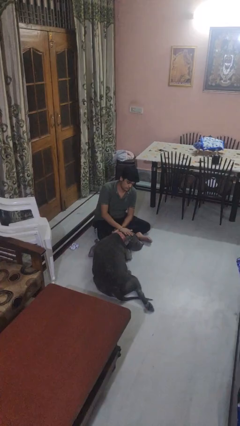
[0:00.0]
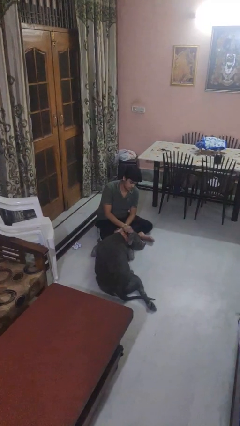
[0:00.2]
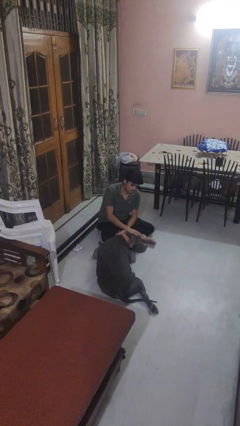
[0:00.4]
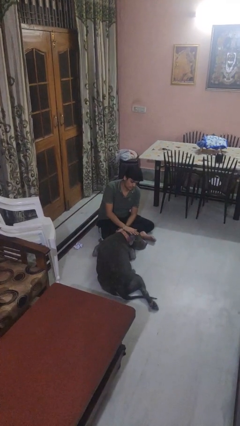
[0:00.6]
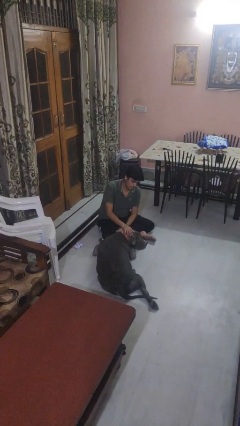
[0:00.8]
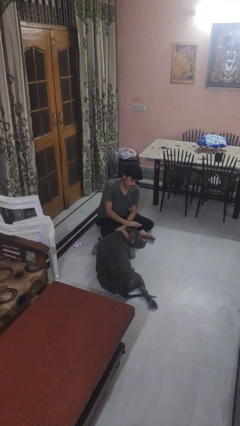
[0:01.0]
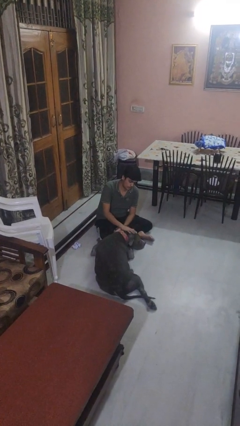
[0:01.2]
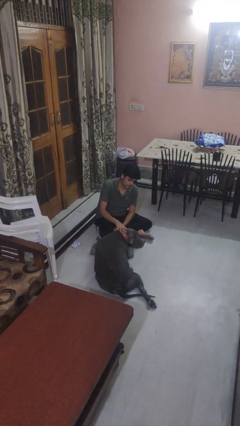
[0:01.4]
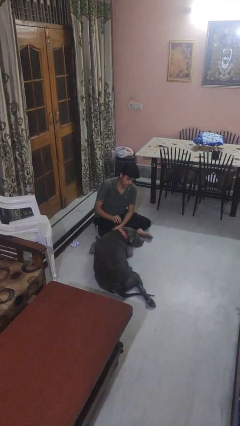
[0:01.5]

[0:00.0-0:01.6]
person pets dog

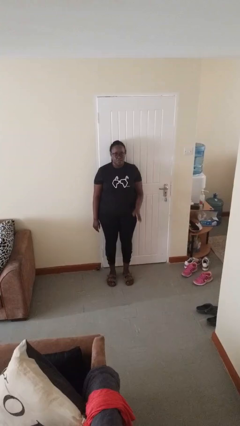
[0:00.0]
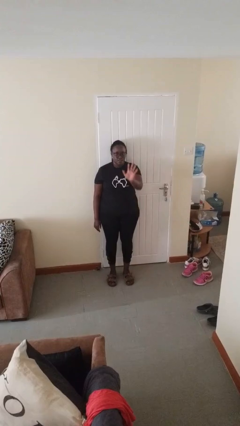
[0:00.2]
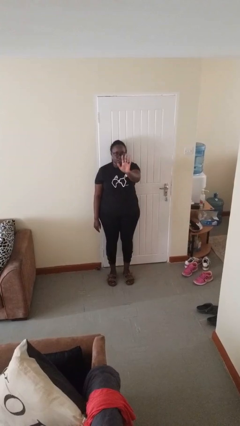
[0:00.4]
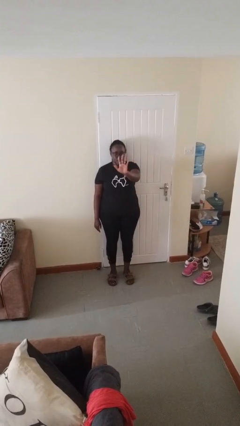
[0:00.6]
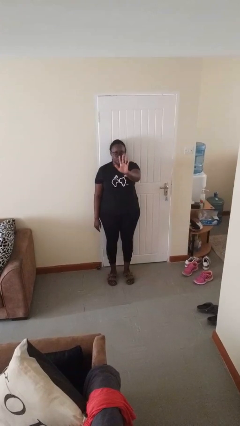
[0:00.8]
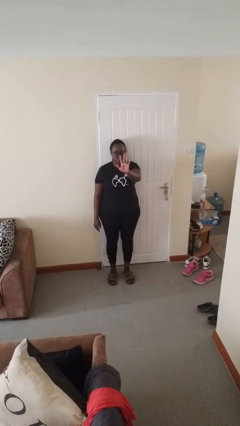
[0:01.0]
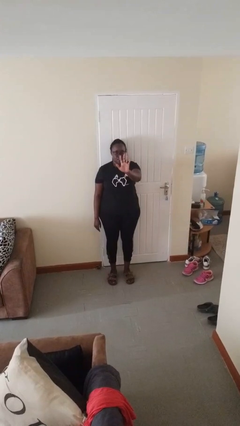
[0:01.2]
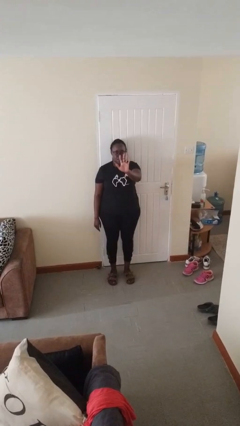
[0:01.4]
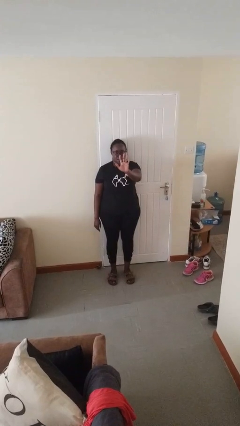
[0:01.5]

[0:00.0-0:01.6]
person gestures number five

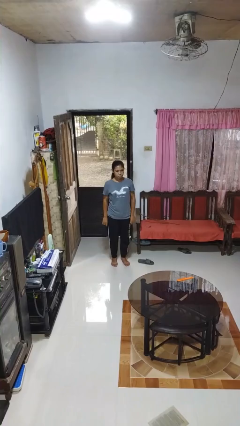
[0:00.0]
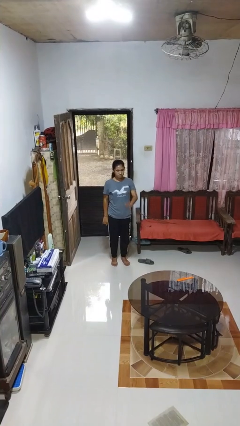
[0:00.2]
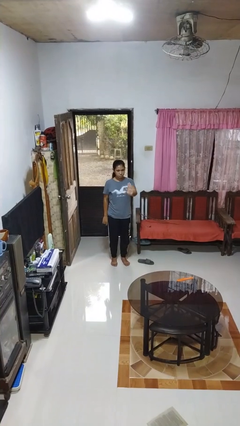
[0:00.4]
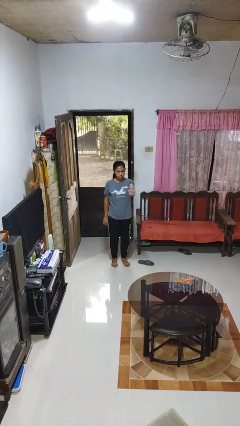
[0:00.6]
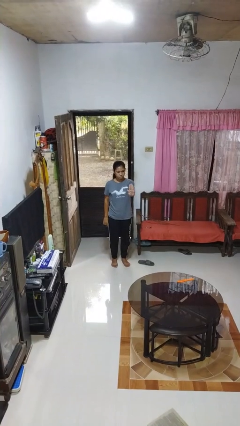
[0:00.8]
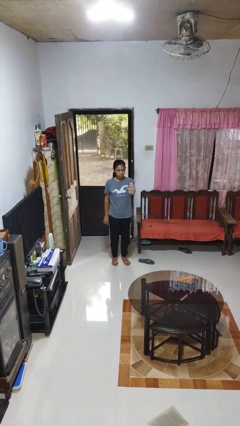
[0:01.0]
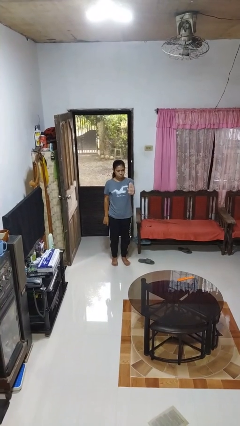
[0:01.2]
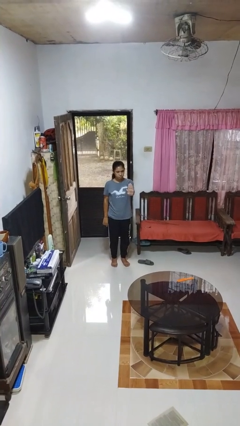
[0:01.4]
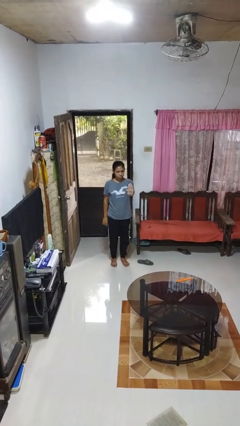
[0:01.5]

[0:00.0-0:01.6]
person gestures stop

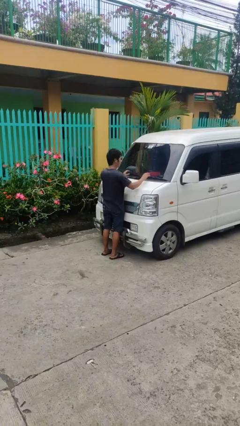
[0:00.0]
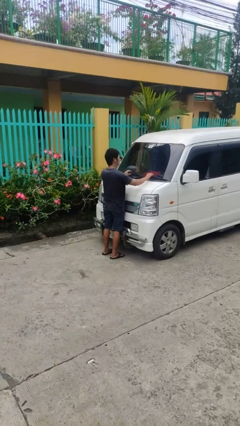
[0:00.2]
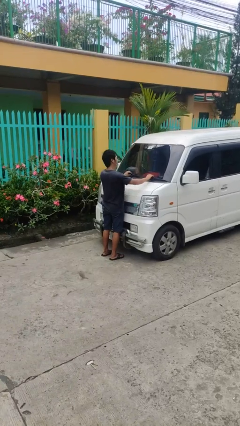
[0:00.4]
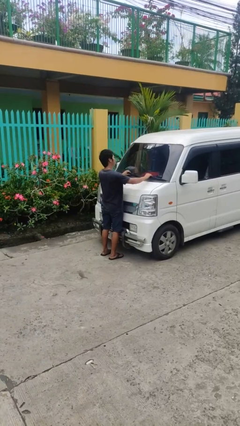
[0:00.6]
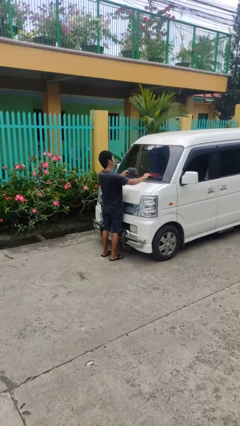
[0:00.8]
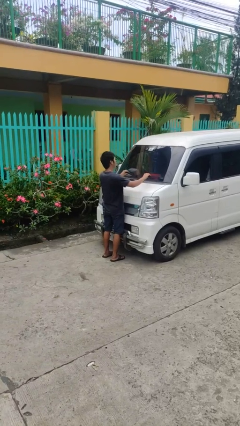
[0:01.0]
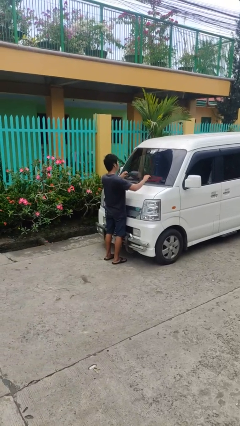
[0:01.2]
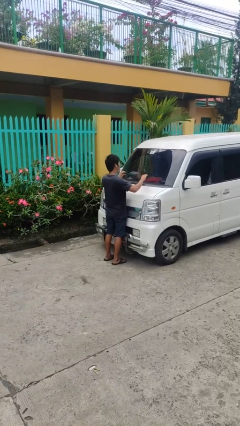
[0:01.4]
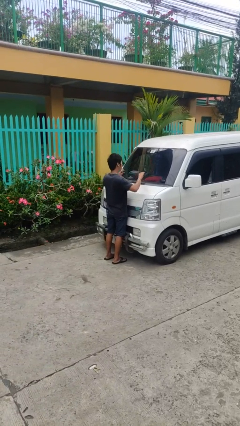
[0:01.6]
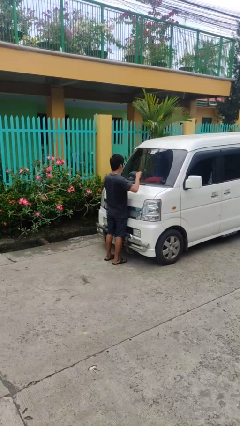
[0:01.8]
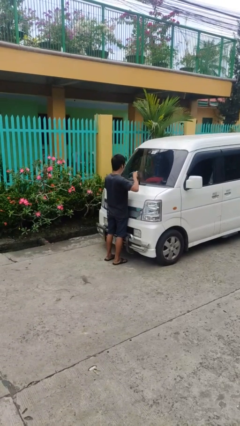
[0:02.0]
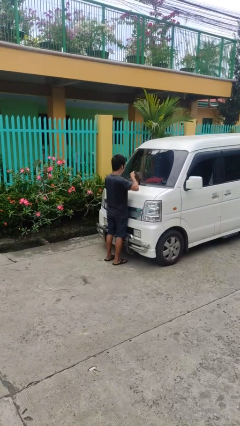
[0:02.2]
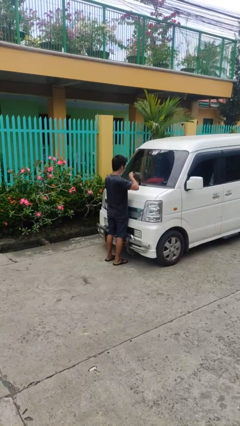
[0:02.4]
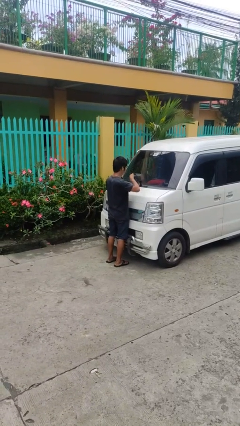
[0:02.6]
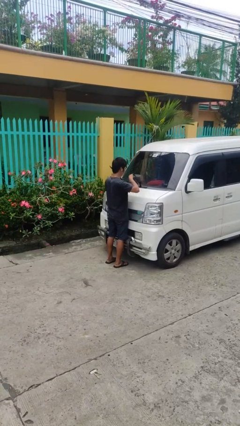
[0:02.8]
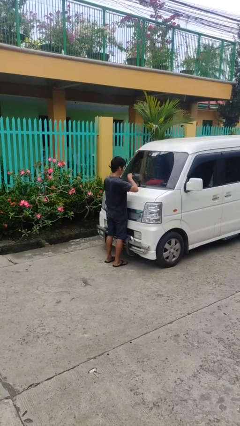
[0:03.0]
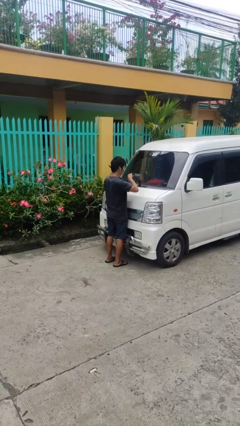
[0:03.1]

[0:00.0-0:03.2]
person flips up car wipers

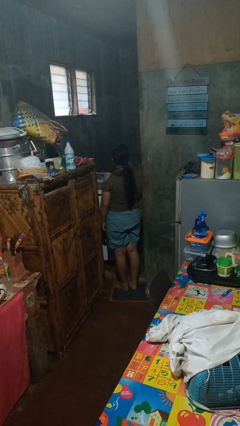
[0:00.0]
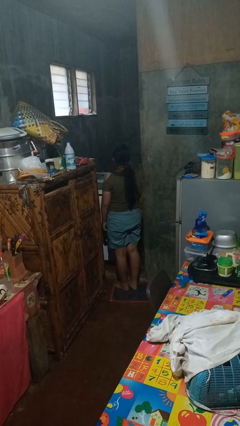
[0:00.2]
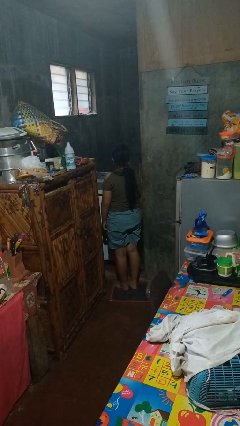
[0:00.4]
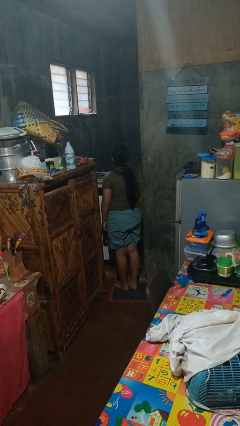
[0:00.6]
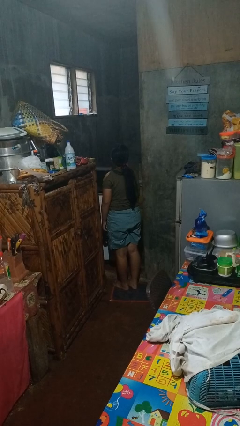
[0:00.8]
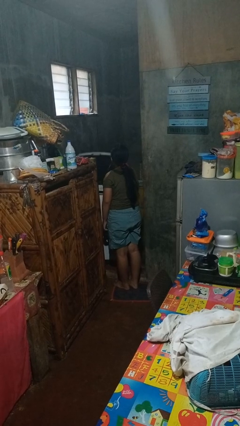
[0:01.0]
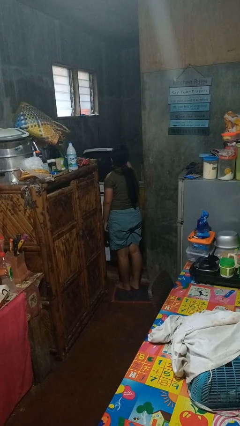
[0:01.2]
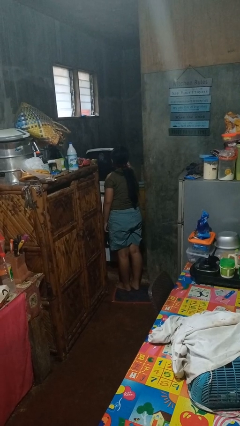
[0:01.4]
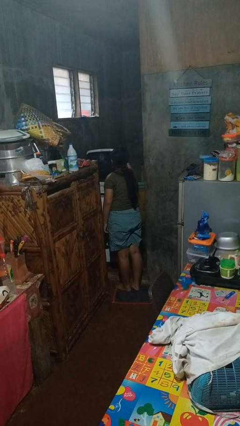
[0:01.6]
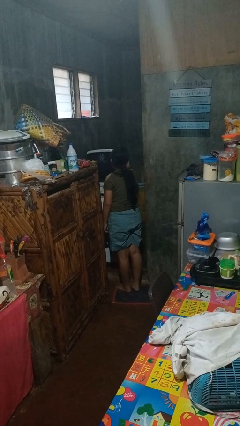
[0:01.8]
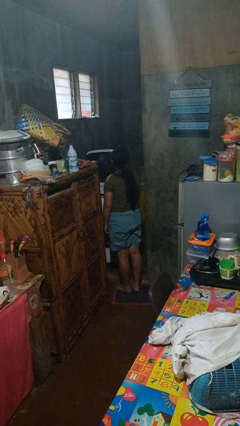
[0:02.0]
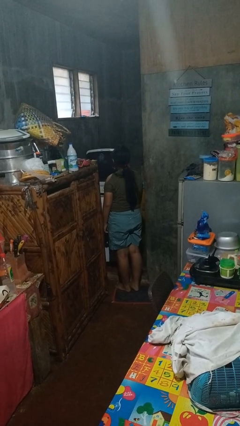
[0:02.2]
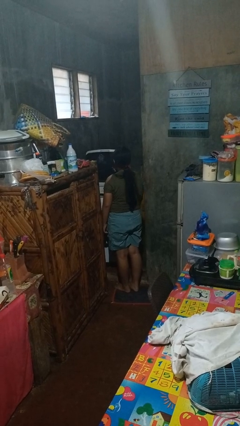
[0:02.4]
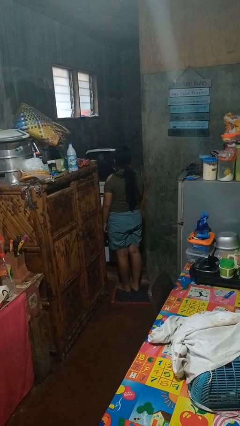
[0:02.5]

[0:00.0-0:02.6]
person opens clothes washer

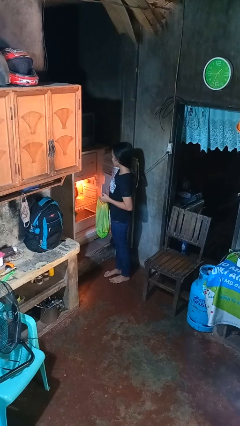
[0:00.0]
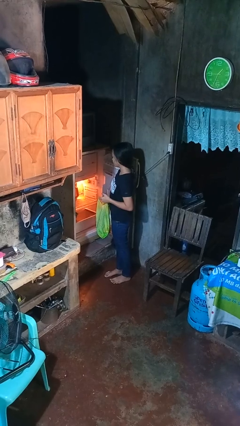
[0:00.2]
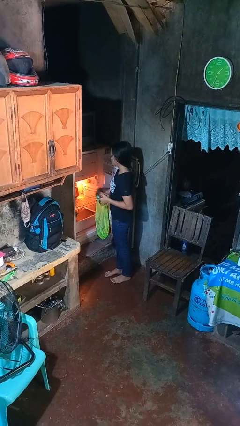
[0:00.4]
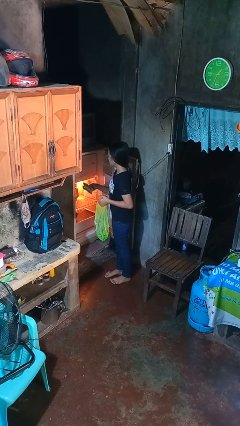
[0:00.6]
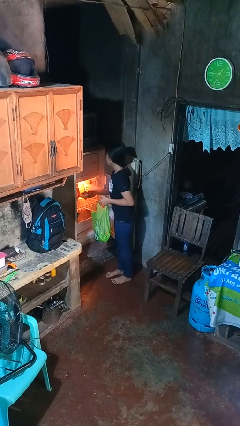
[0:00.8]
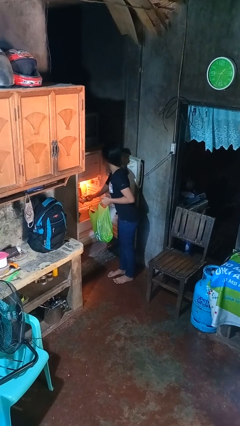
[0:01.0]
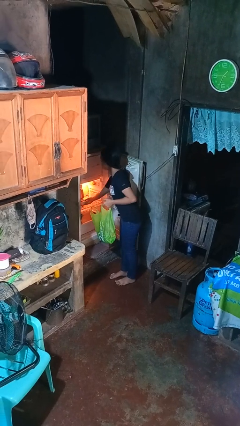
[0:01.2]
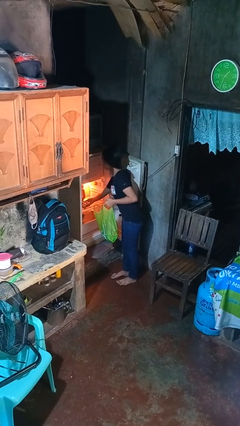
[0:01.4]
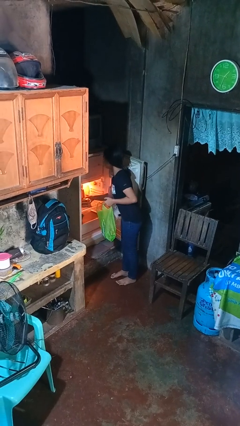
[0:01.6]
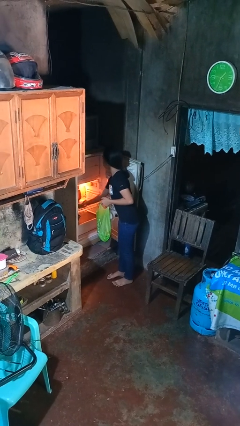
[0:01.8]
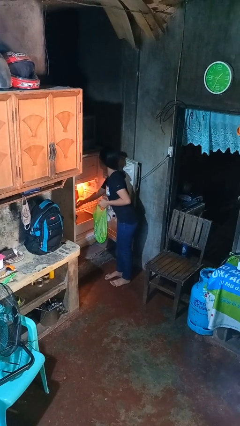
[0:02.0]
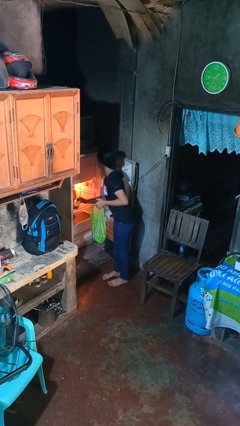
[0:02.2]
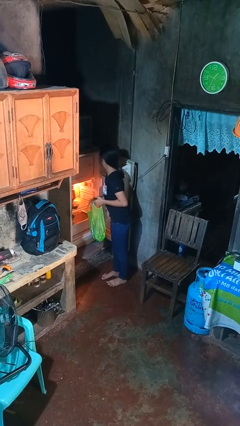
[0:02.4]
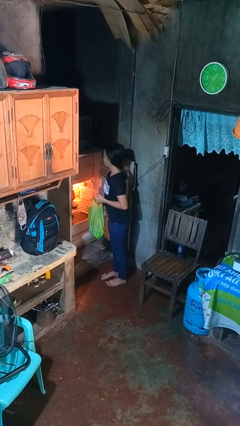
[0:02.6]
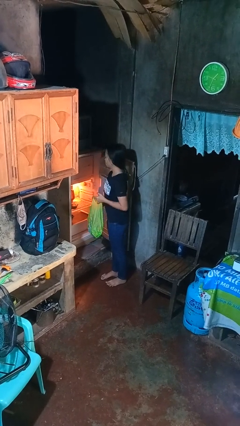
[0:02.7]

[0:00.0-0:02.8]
person loads groceries into refrigerator

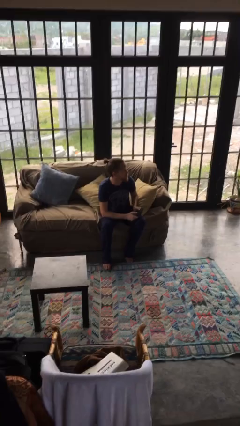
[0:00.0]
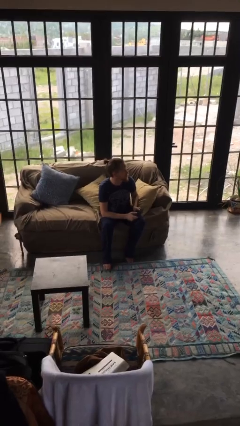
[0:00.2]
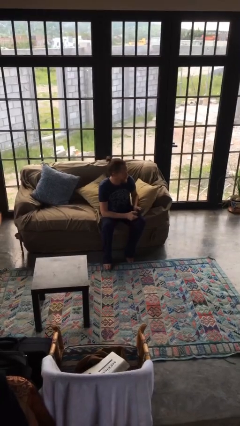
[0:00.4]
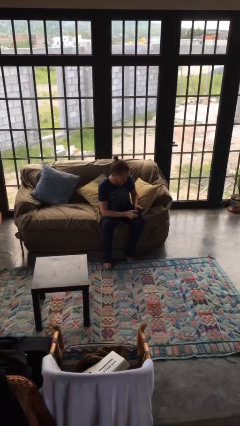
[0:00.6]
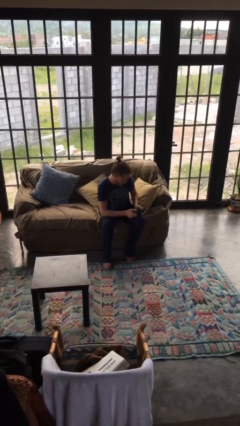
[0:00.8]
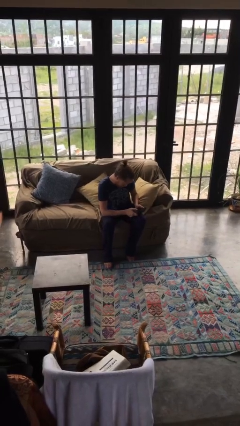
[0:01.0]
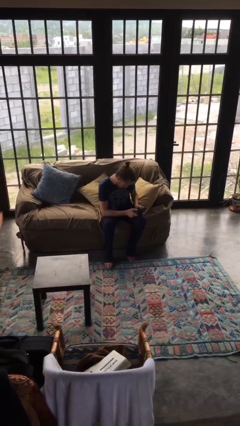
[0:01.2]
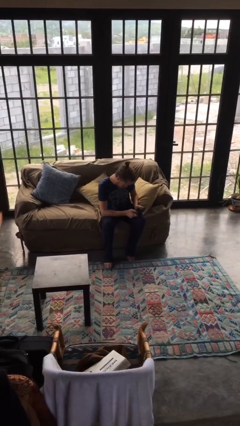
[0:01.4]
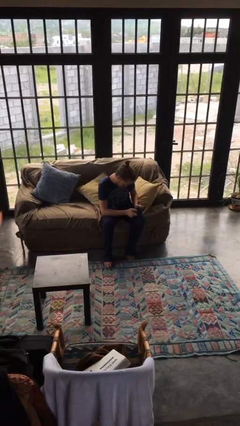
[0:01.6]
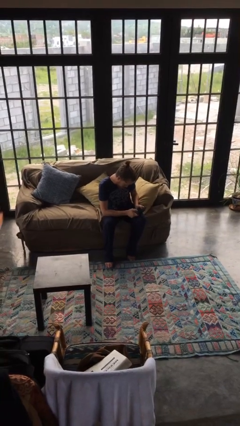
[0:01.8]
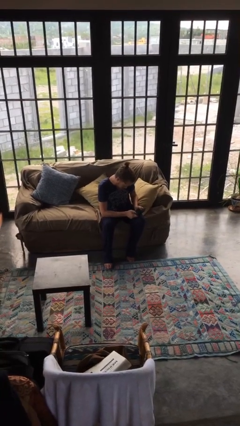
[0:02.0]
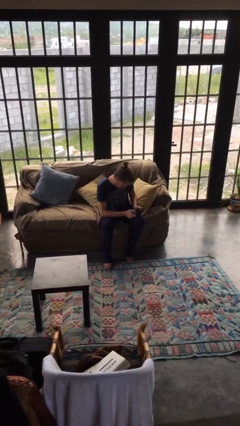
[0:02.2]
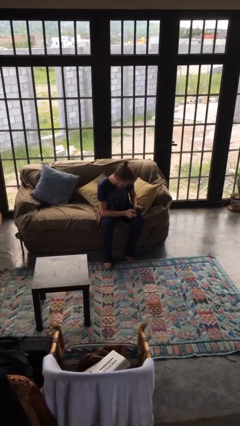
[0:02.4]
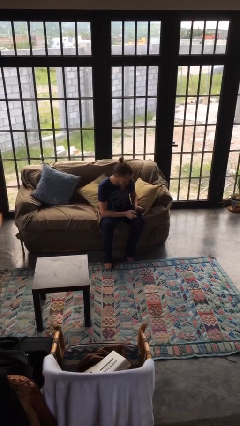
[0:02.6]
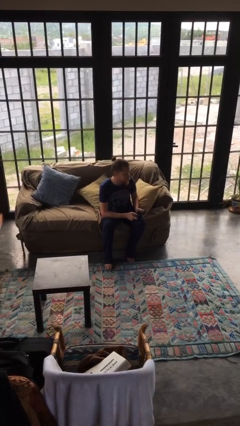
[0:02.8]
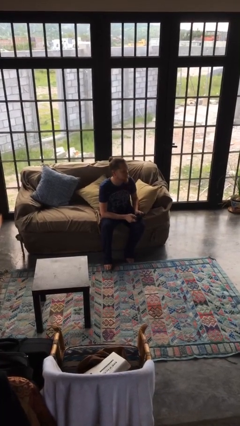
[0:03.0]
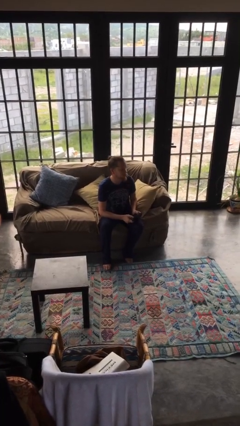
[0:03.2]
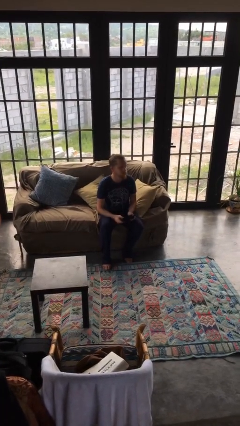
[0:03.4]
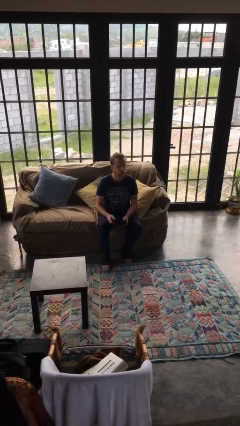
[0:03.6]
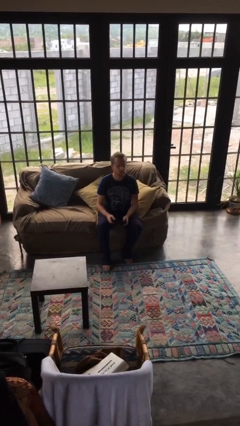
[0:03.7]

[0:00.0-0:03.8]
person interacts with handheld game
